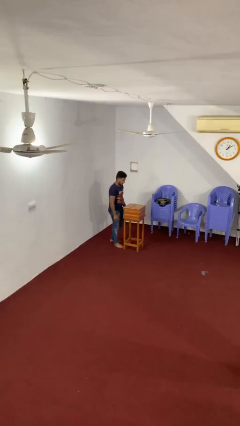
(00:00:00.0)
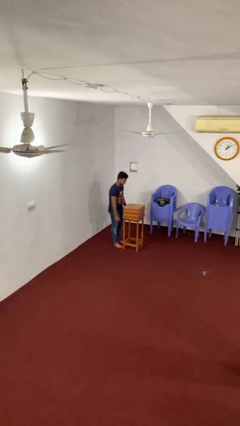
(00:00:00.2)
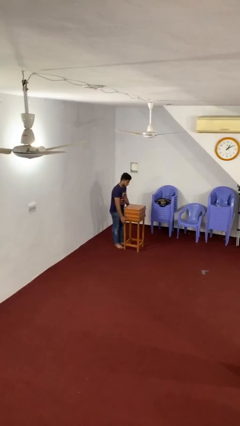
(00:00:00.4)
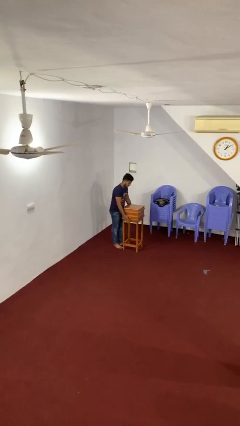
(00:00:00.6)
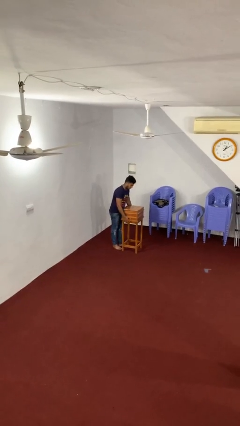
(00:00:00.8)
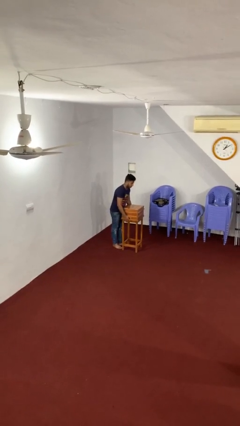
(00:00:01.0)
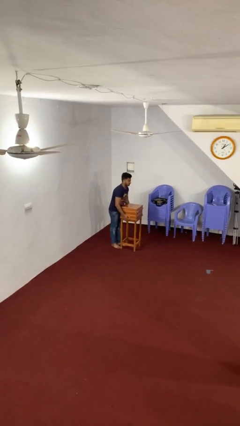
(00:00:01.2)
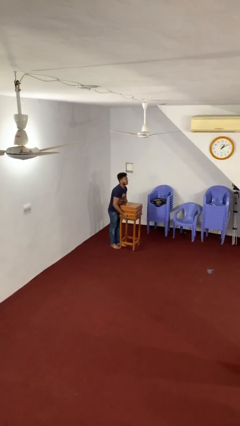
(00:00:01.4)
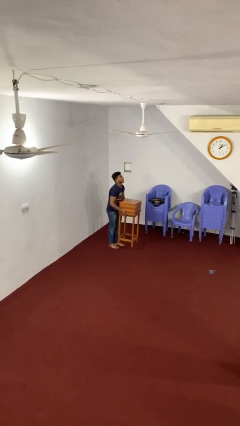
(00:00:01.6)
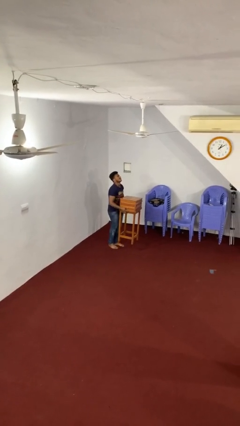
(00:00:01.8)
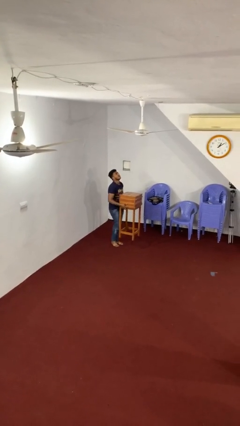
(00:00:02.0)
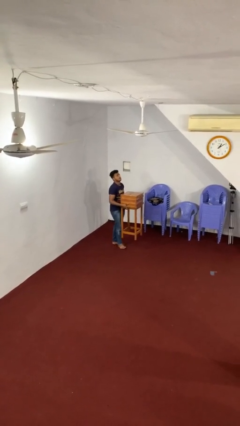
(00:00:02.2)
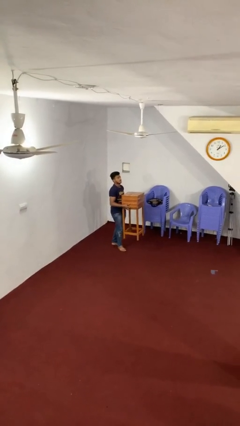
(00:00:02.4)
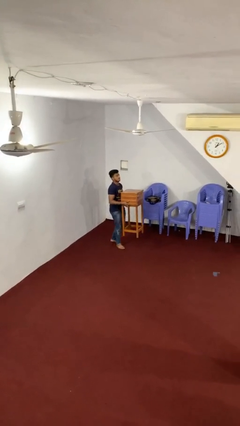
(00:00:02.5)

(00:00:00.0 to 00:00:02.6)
person picks up object from floor

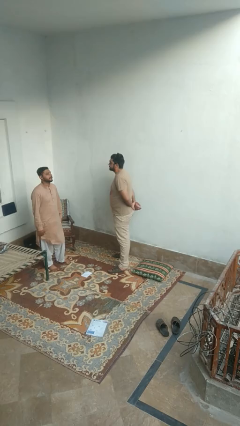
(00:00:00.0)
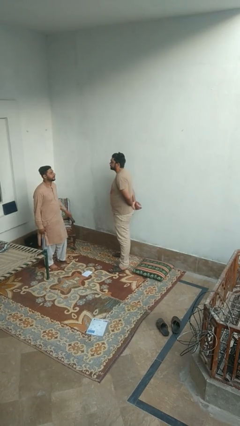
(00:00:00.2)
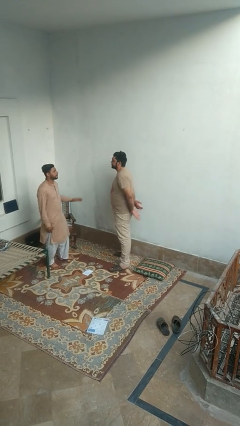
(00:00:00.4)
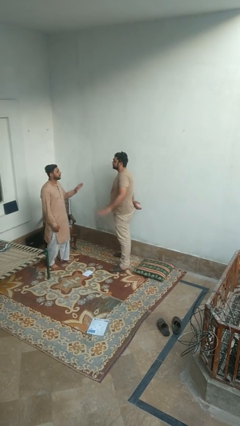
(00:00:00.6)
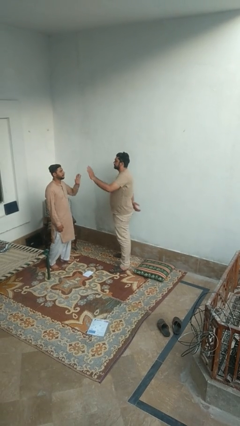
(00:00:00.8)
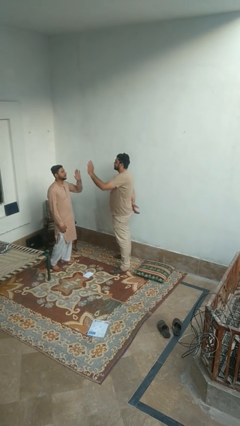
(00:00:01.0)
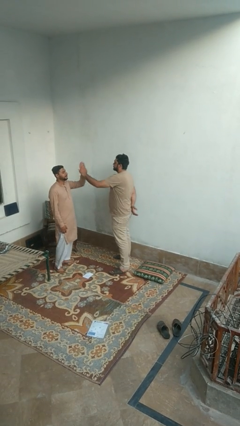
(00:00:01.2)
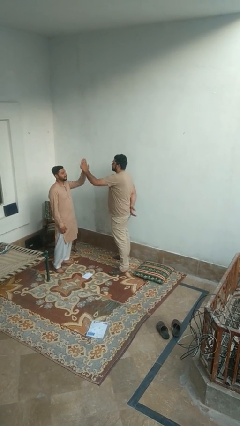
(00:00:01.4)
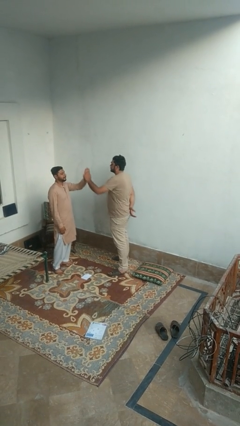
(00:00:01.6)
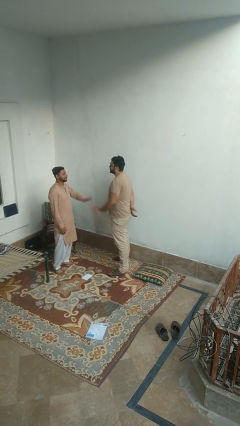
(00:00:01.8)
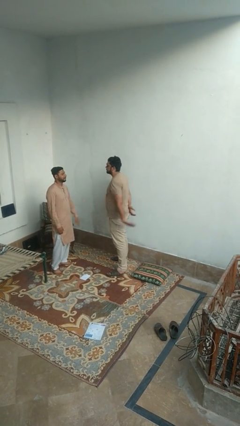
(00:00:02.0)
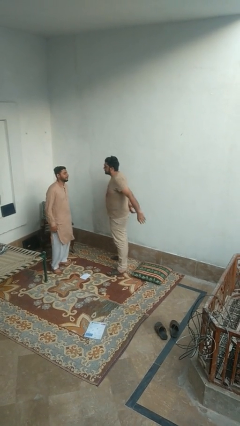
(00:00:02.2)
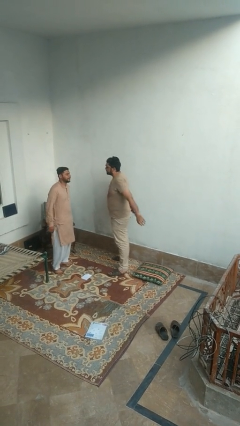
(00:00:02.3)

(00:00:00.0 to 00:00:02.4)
person highfives hand

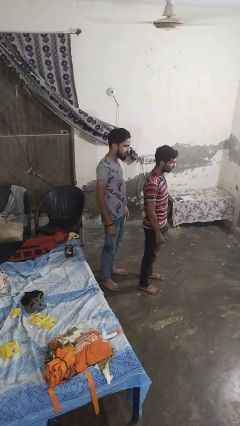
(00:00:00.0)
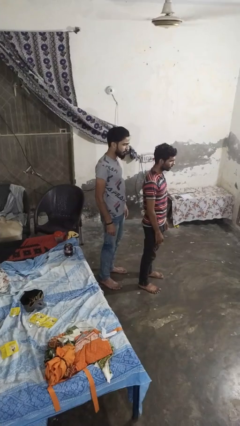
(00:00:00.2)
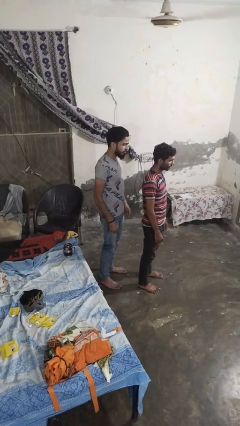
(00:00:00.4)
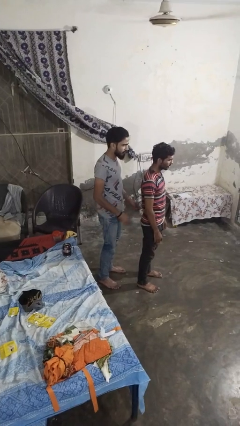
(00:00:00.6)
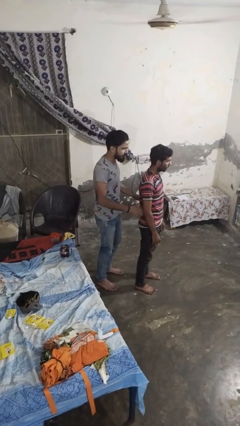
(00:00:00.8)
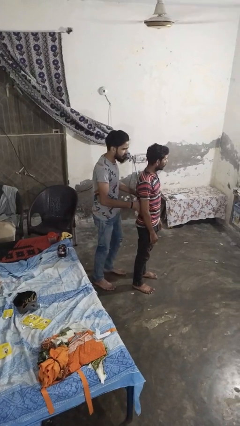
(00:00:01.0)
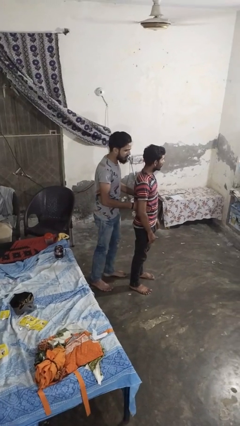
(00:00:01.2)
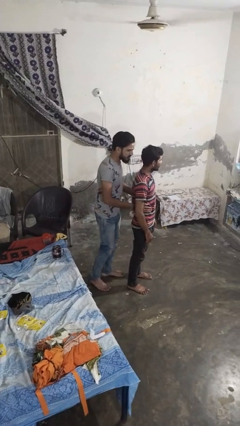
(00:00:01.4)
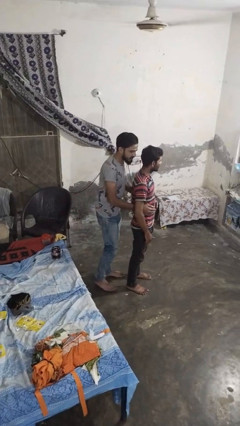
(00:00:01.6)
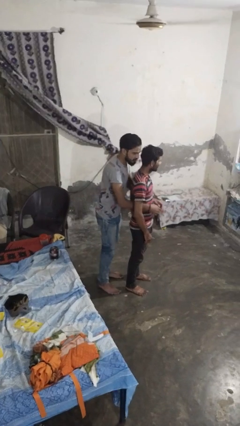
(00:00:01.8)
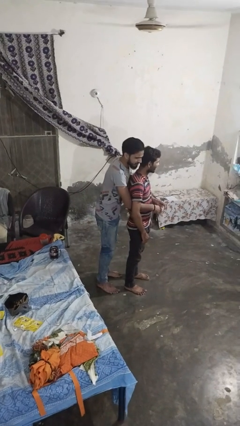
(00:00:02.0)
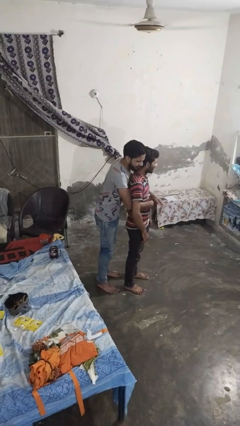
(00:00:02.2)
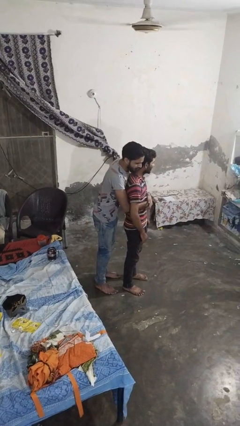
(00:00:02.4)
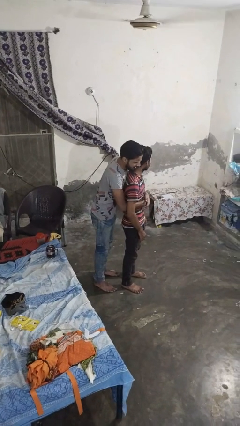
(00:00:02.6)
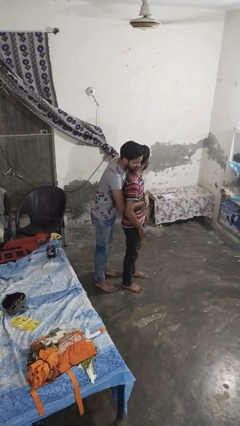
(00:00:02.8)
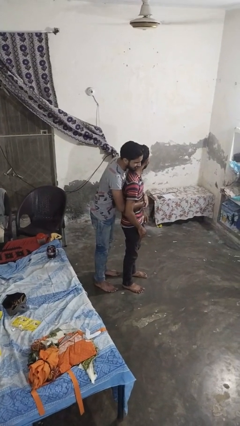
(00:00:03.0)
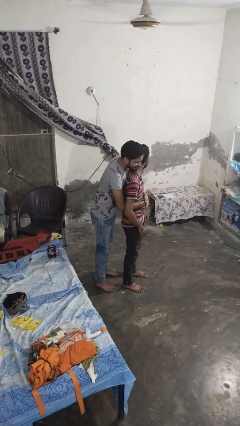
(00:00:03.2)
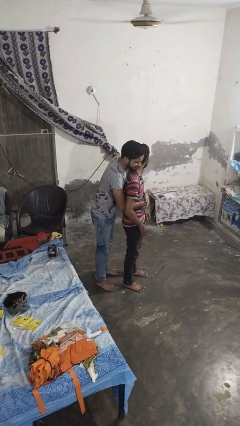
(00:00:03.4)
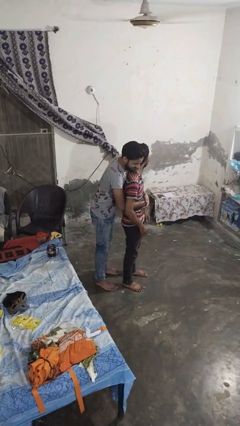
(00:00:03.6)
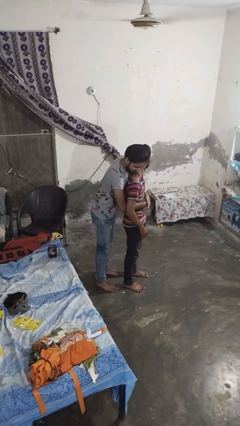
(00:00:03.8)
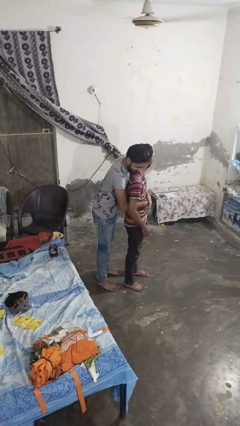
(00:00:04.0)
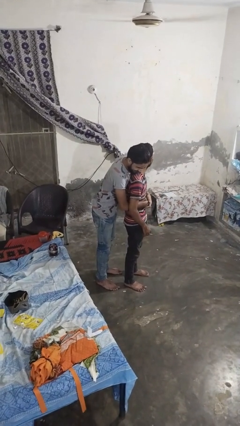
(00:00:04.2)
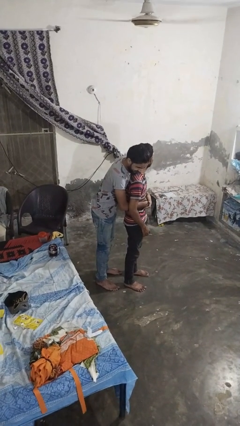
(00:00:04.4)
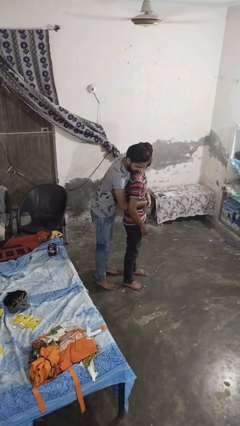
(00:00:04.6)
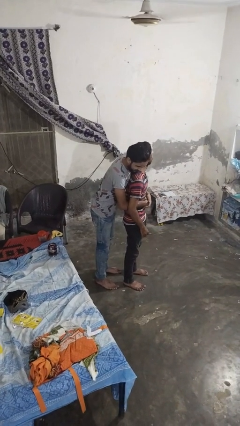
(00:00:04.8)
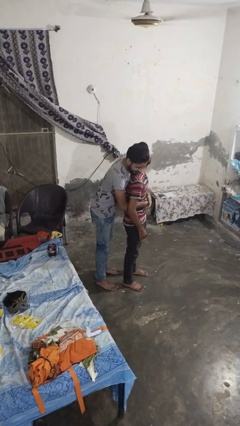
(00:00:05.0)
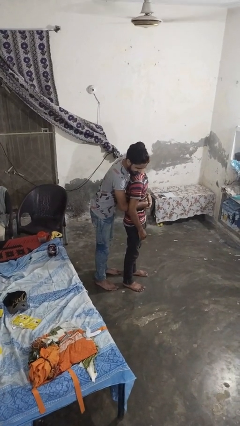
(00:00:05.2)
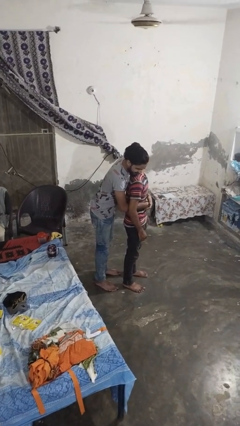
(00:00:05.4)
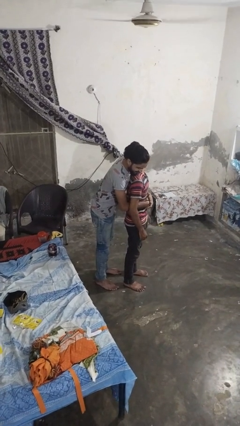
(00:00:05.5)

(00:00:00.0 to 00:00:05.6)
person hugs person from behind

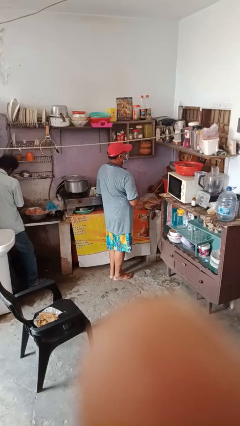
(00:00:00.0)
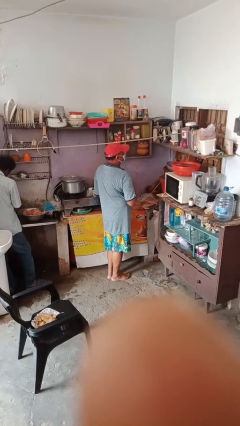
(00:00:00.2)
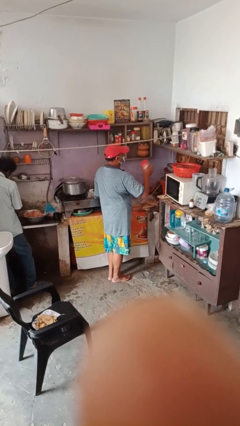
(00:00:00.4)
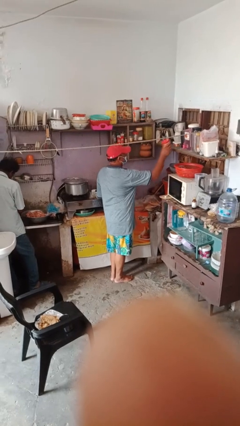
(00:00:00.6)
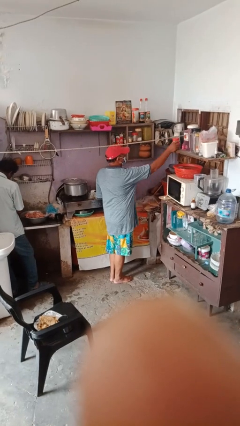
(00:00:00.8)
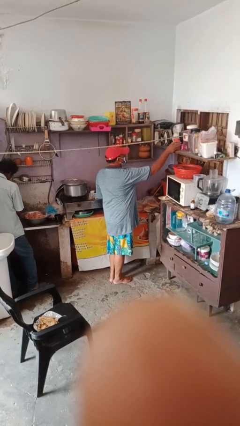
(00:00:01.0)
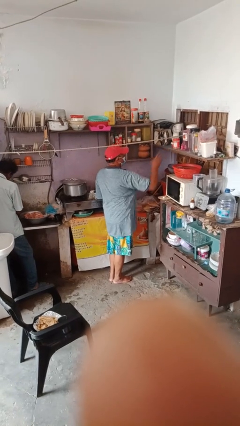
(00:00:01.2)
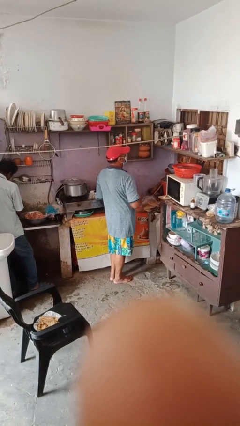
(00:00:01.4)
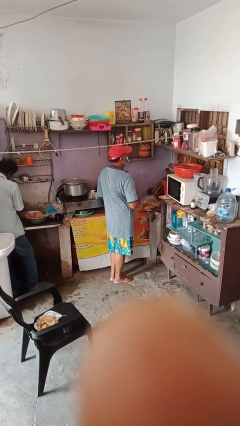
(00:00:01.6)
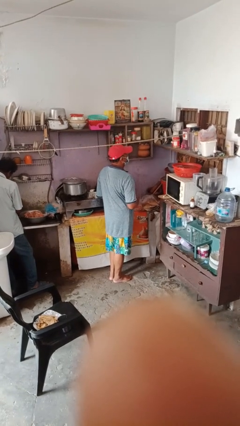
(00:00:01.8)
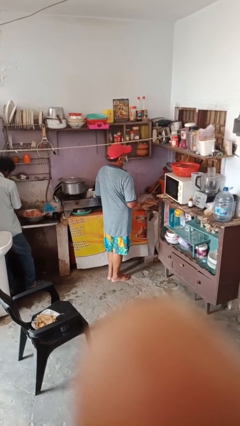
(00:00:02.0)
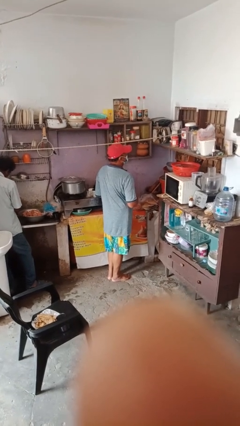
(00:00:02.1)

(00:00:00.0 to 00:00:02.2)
person puts down object on shelf

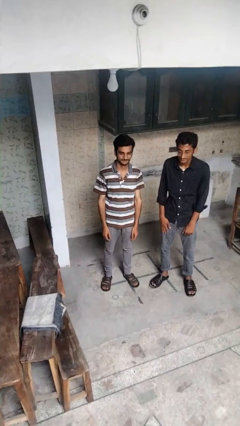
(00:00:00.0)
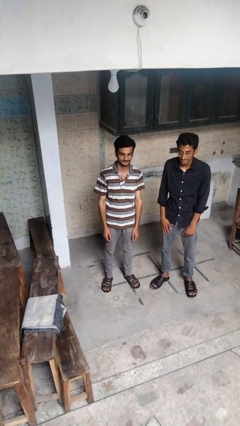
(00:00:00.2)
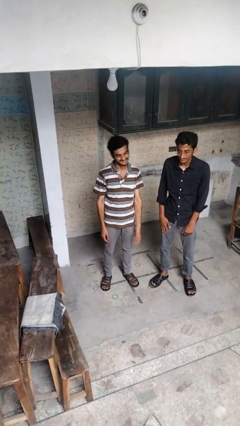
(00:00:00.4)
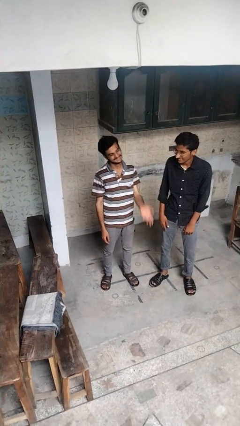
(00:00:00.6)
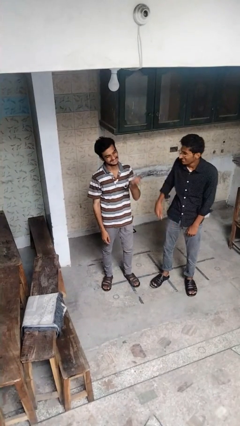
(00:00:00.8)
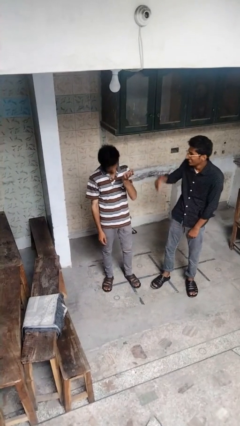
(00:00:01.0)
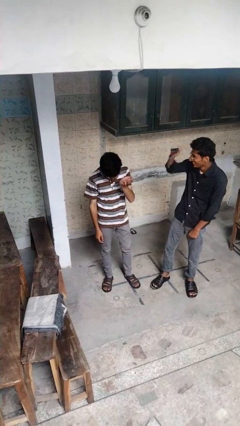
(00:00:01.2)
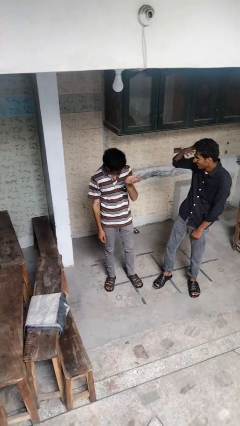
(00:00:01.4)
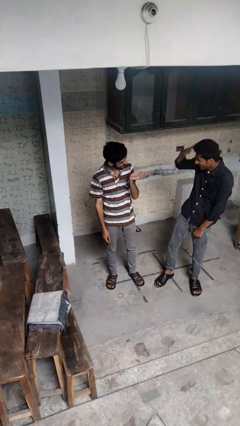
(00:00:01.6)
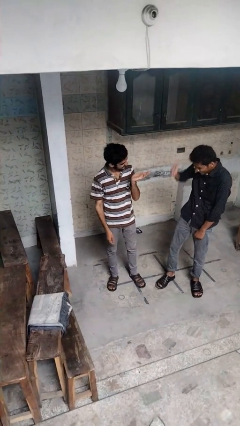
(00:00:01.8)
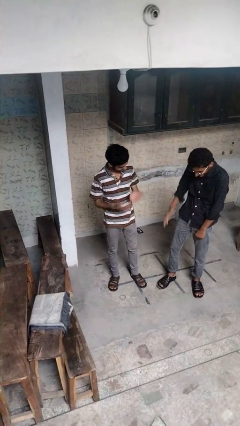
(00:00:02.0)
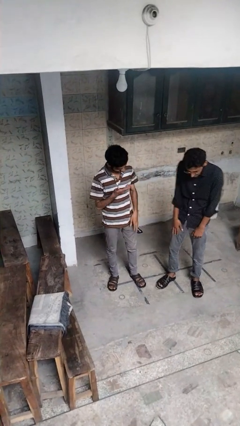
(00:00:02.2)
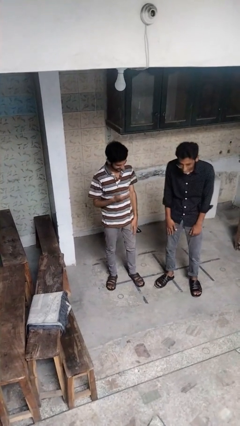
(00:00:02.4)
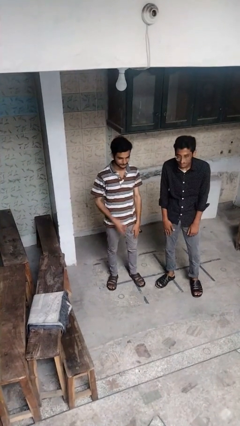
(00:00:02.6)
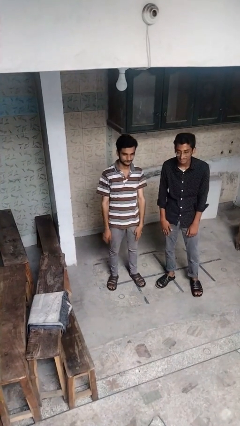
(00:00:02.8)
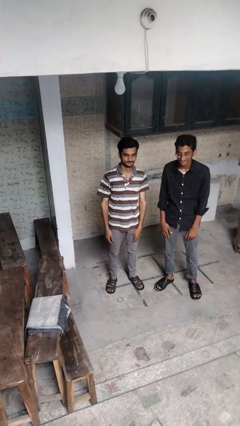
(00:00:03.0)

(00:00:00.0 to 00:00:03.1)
person laughs with person

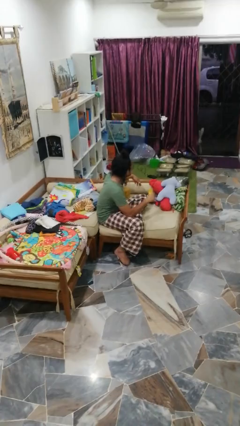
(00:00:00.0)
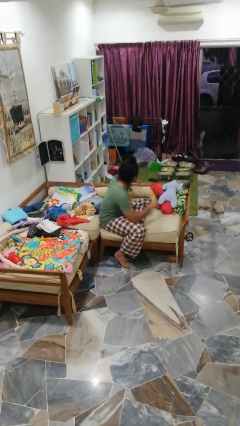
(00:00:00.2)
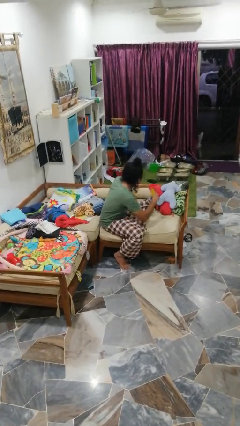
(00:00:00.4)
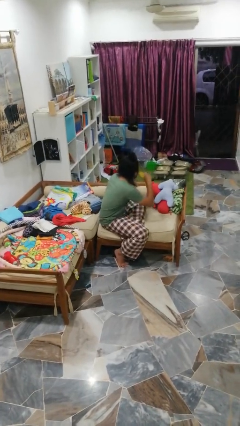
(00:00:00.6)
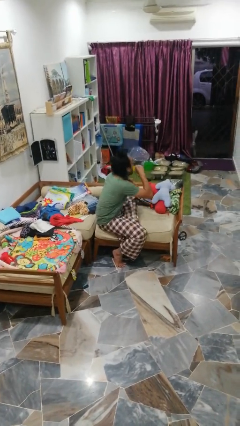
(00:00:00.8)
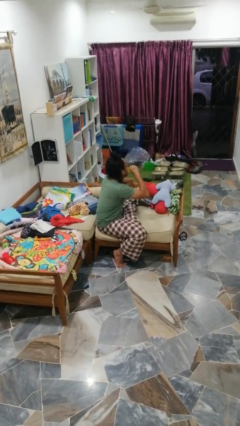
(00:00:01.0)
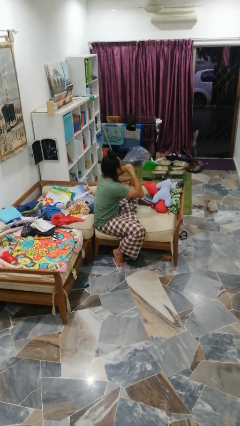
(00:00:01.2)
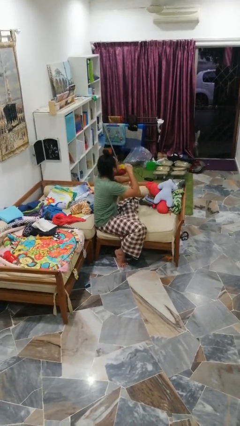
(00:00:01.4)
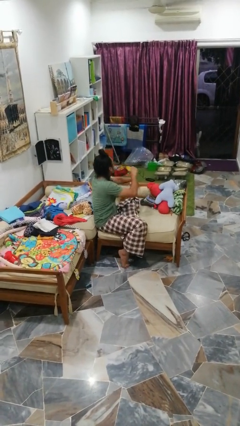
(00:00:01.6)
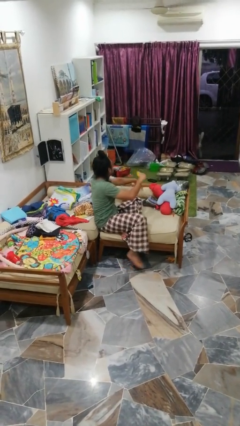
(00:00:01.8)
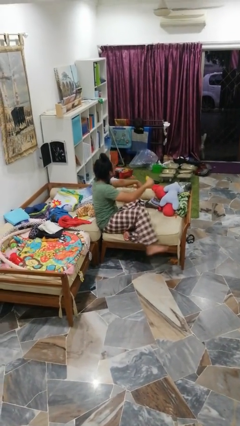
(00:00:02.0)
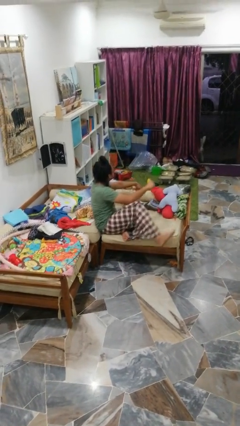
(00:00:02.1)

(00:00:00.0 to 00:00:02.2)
person eats banana
